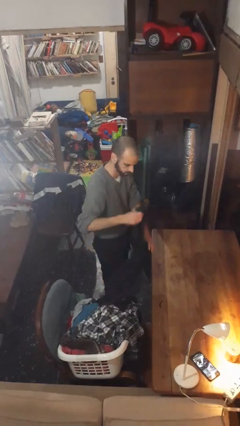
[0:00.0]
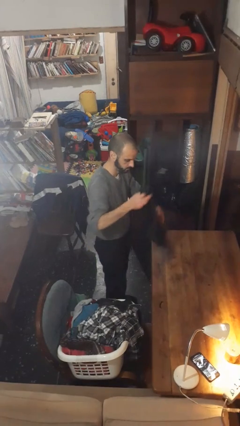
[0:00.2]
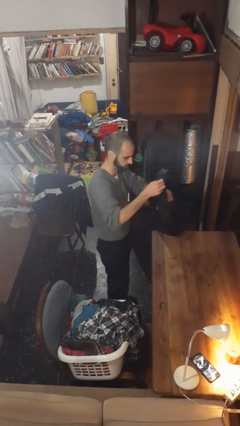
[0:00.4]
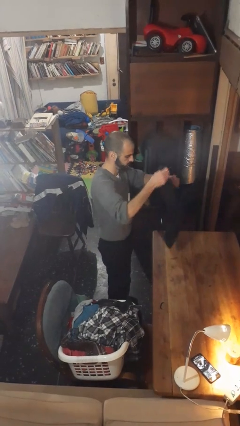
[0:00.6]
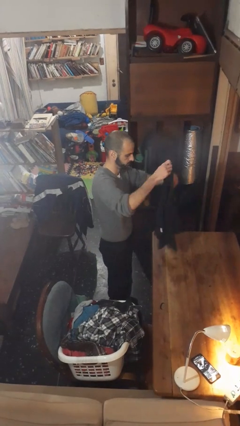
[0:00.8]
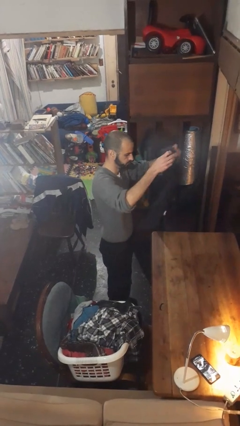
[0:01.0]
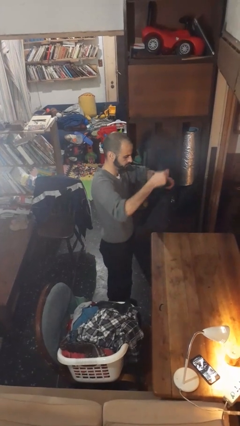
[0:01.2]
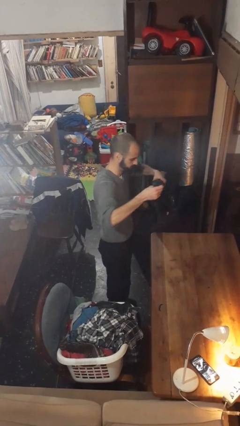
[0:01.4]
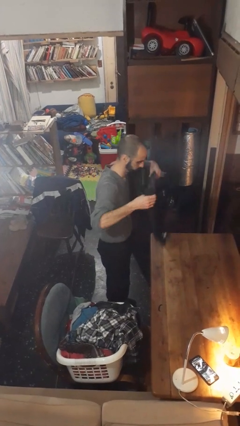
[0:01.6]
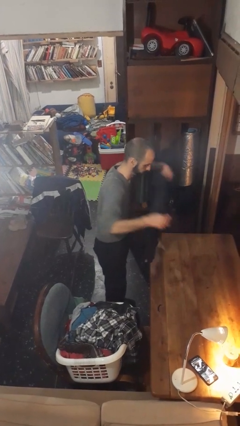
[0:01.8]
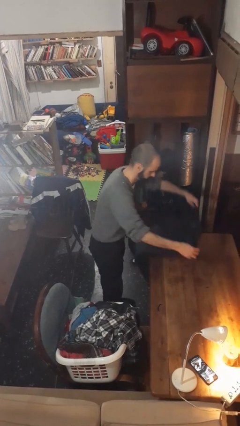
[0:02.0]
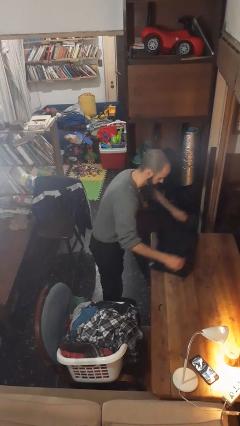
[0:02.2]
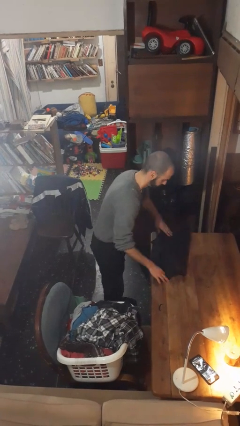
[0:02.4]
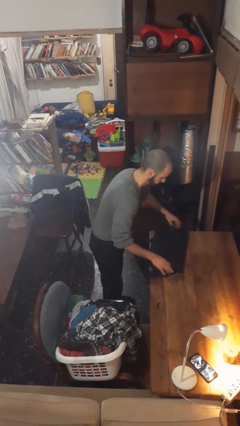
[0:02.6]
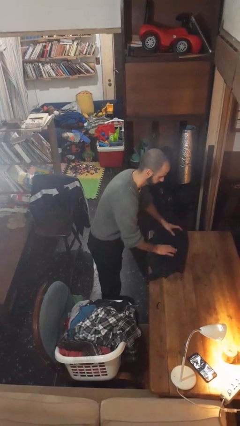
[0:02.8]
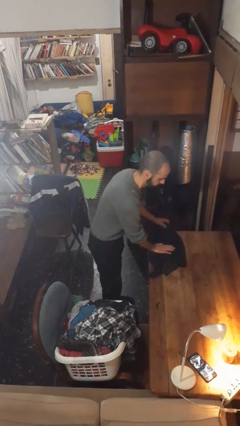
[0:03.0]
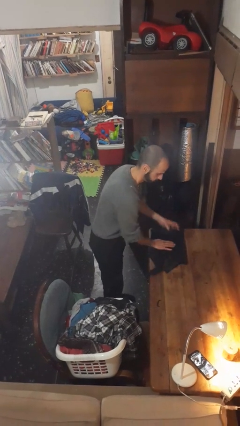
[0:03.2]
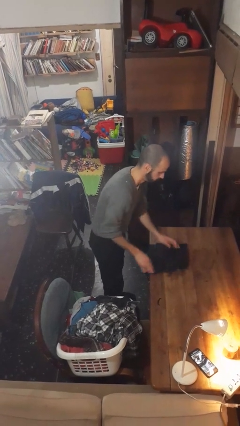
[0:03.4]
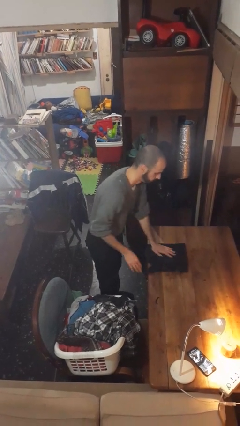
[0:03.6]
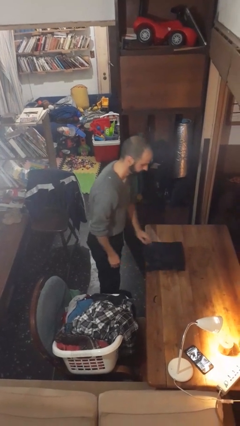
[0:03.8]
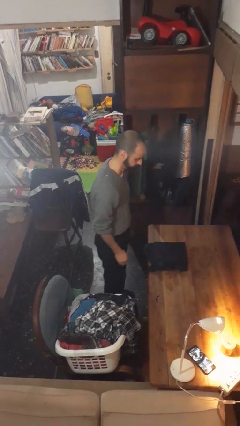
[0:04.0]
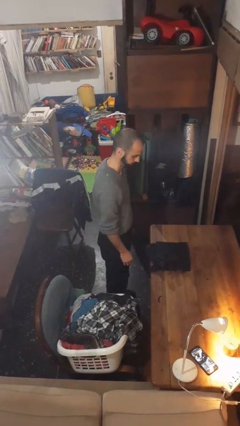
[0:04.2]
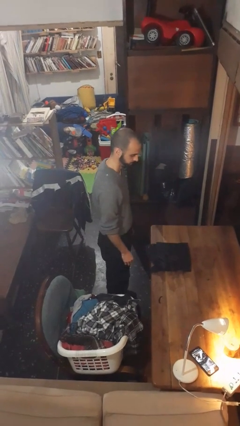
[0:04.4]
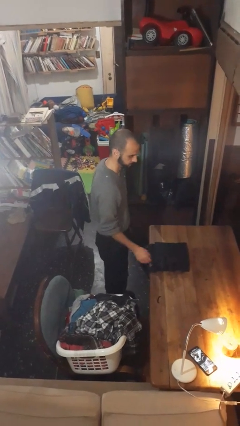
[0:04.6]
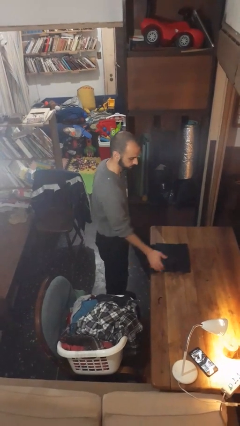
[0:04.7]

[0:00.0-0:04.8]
person folds shirt

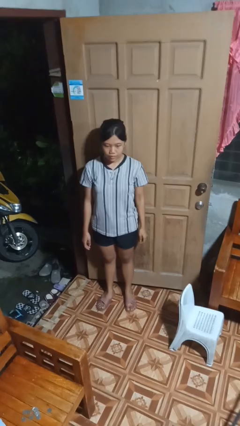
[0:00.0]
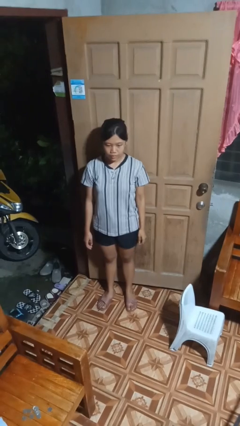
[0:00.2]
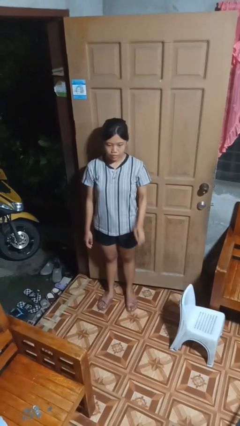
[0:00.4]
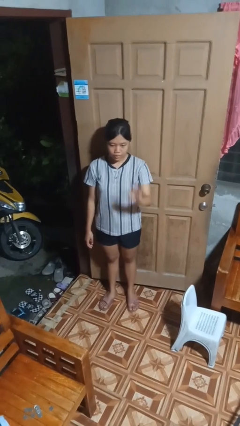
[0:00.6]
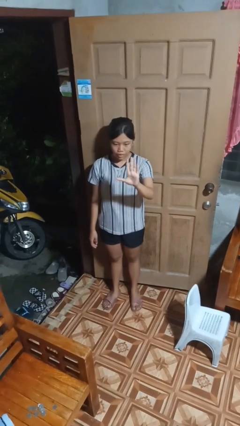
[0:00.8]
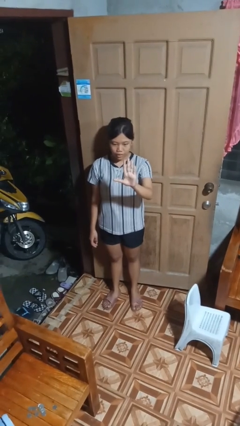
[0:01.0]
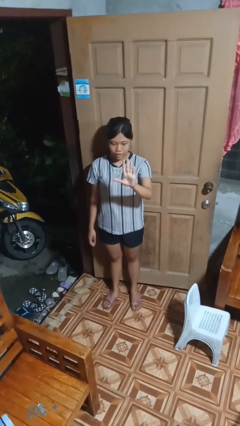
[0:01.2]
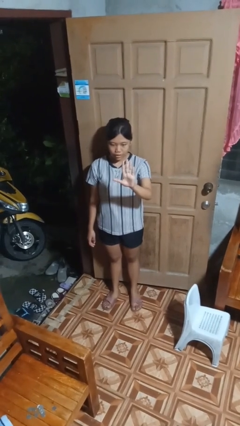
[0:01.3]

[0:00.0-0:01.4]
person gestures number five

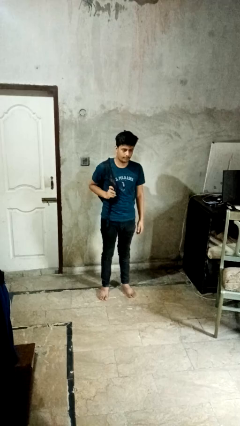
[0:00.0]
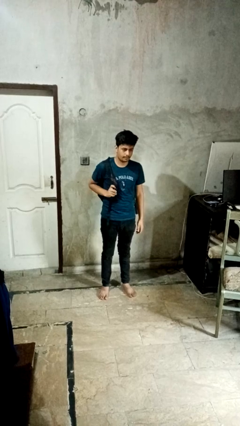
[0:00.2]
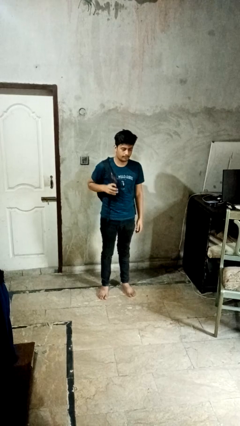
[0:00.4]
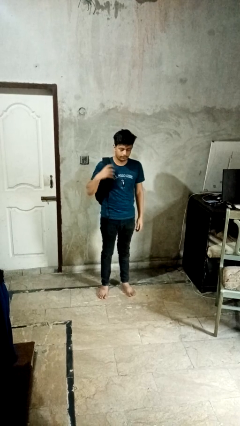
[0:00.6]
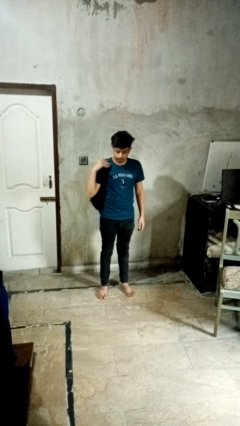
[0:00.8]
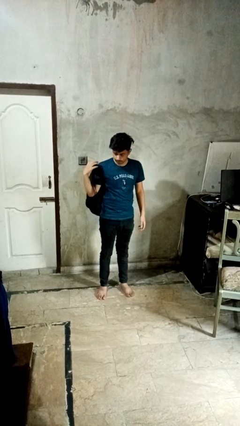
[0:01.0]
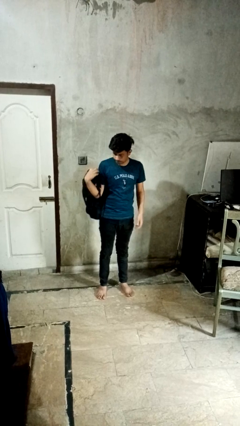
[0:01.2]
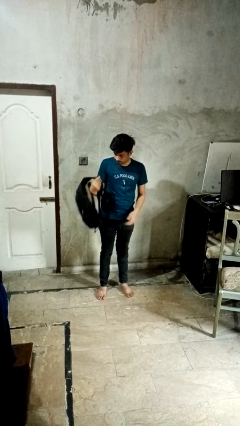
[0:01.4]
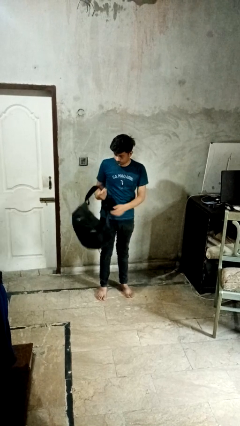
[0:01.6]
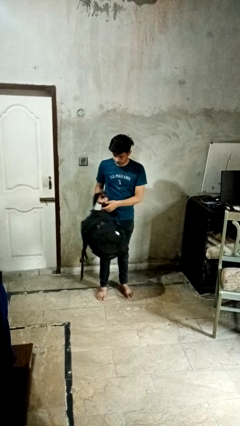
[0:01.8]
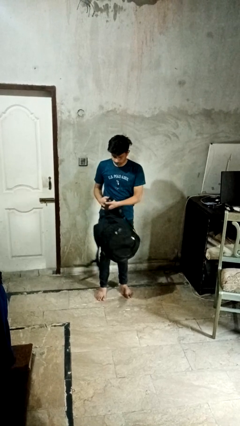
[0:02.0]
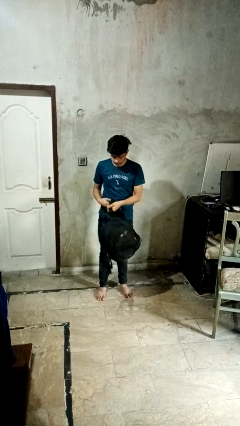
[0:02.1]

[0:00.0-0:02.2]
person takes off backpack

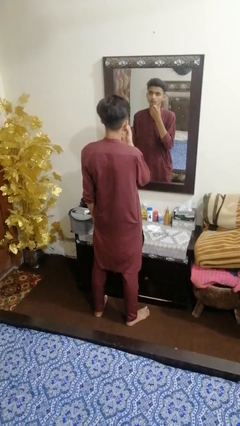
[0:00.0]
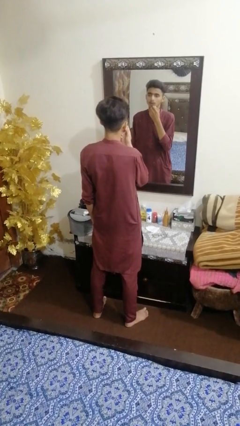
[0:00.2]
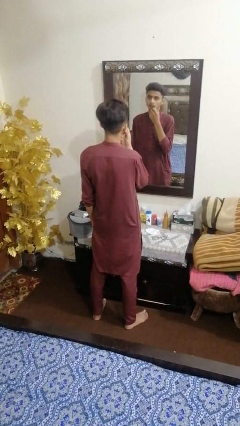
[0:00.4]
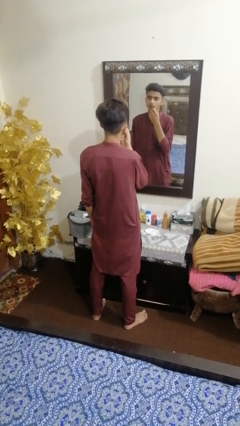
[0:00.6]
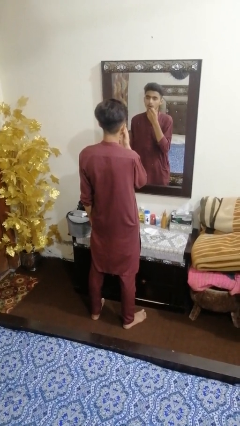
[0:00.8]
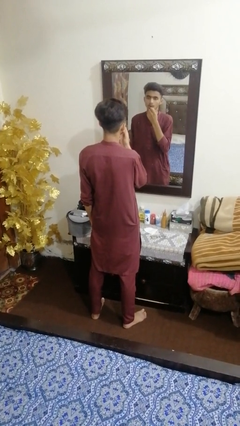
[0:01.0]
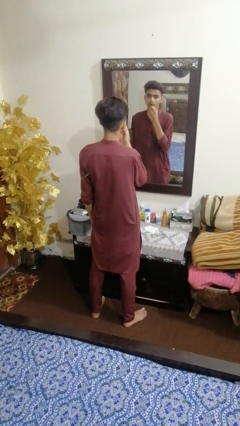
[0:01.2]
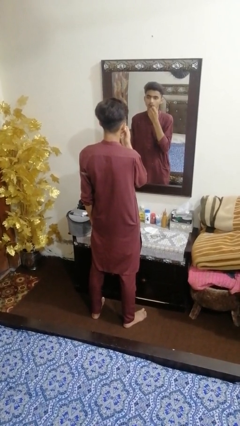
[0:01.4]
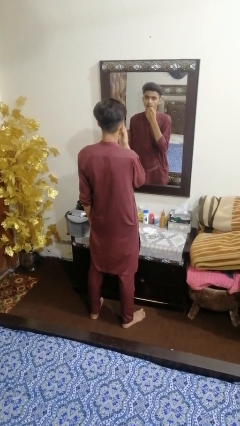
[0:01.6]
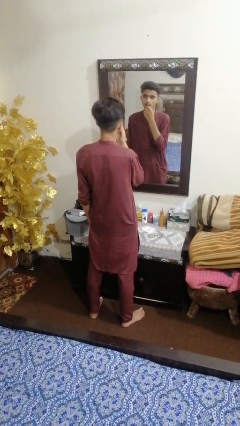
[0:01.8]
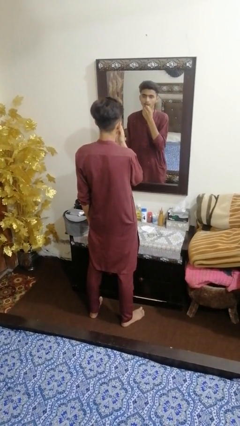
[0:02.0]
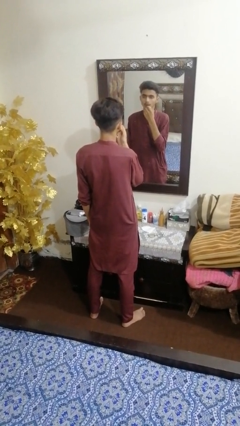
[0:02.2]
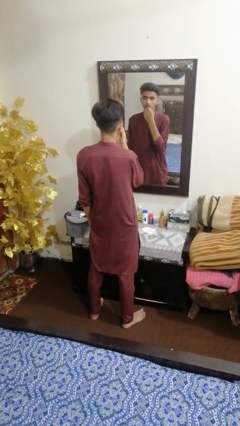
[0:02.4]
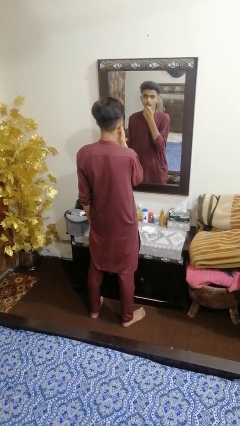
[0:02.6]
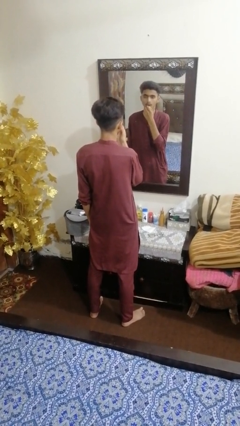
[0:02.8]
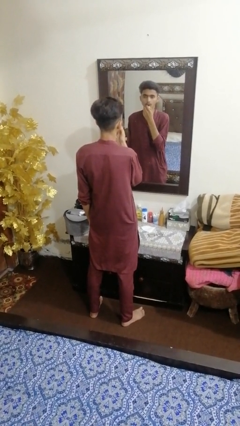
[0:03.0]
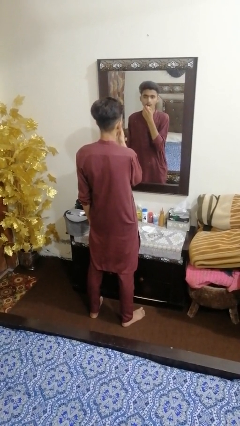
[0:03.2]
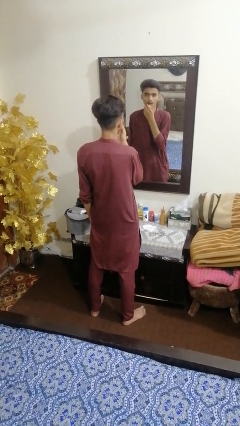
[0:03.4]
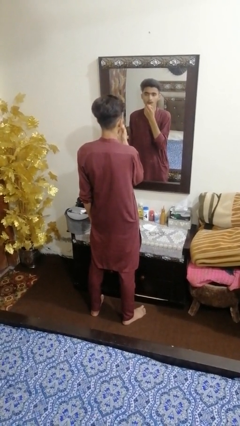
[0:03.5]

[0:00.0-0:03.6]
person applies lip makeup

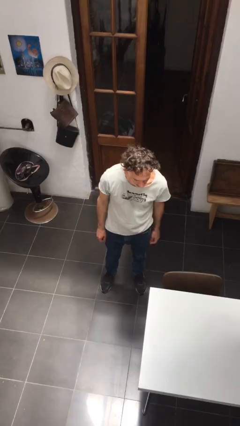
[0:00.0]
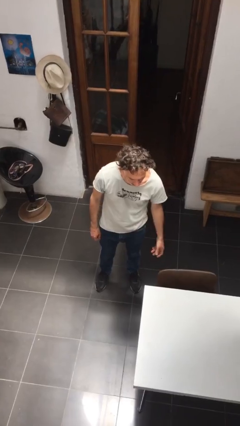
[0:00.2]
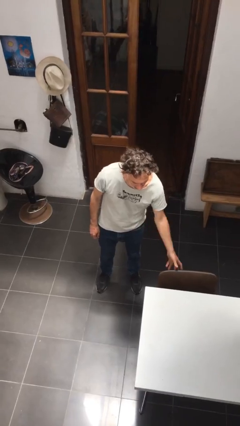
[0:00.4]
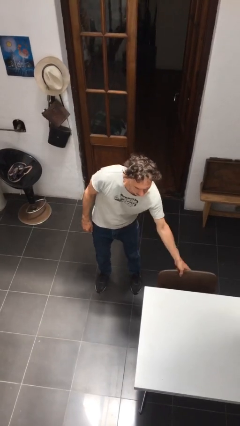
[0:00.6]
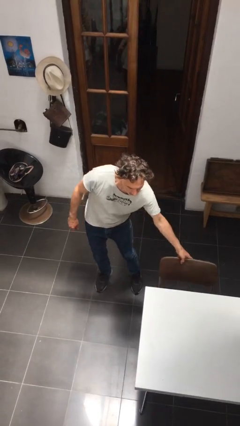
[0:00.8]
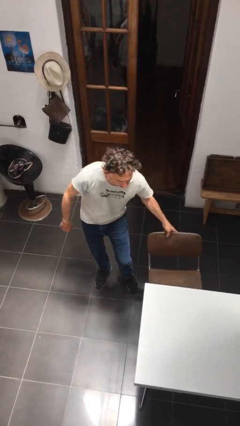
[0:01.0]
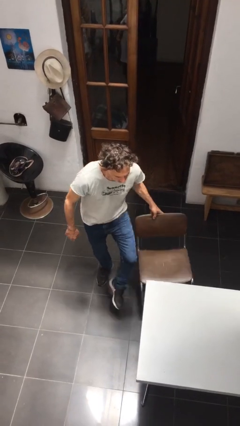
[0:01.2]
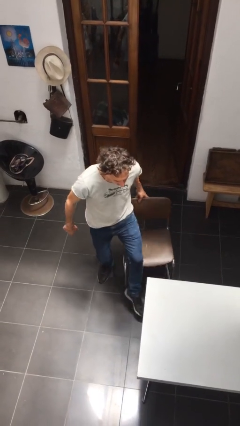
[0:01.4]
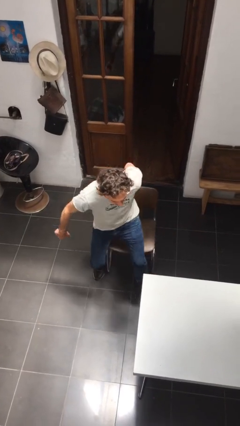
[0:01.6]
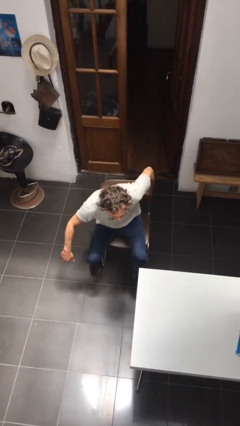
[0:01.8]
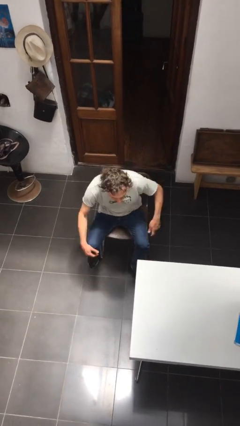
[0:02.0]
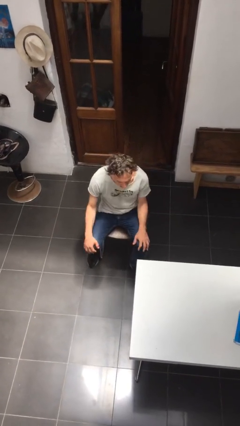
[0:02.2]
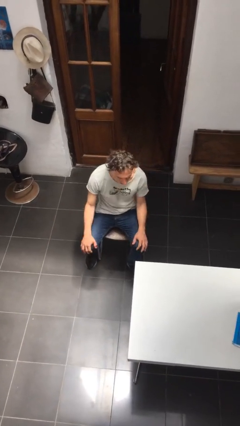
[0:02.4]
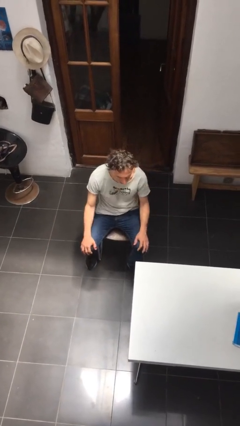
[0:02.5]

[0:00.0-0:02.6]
person sits down

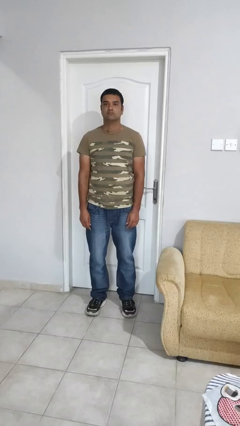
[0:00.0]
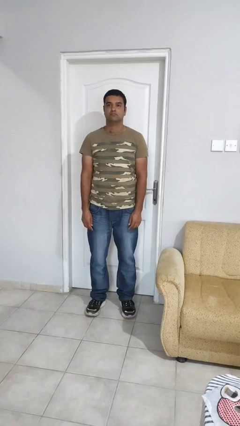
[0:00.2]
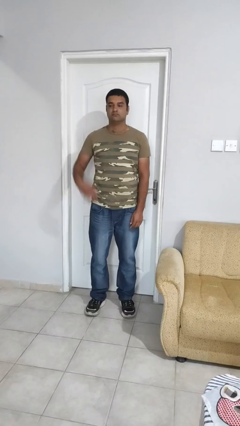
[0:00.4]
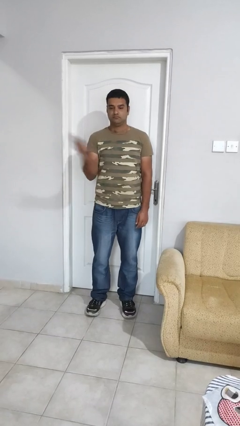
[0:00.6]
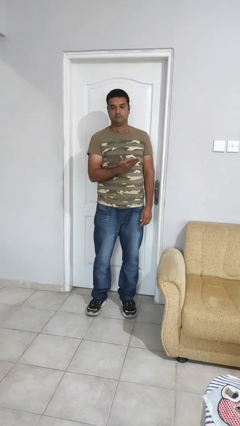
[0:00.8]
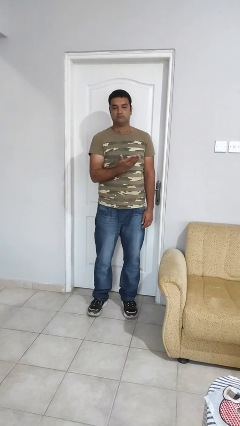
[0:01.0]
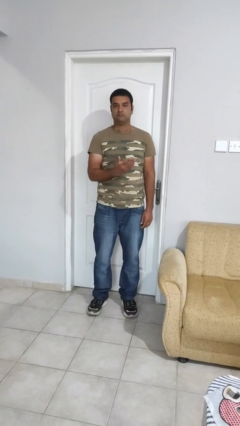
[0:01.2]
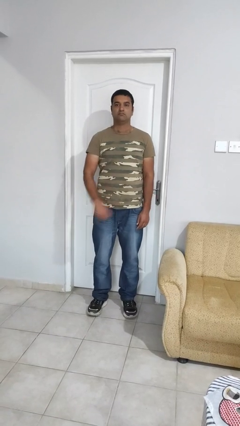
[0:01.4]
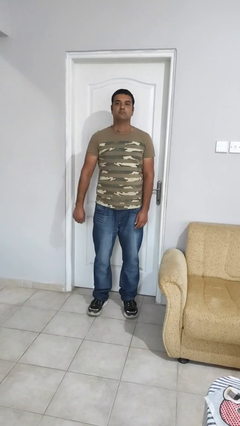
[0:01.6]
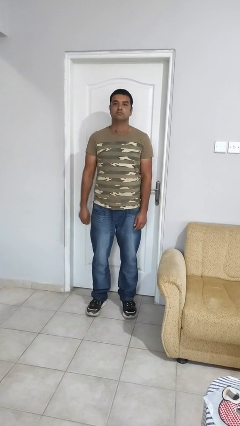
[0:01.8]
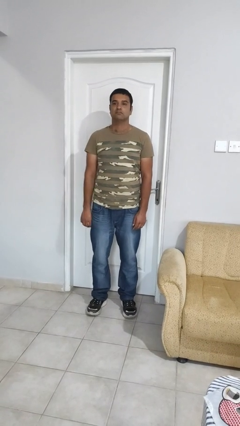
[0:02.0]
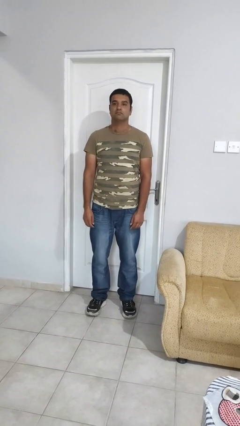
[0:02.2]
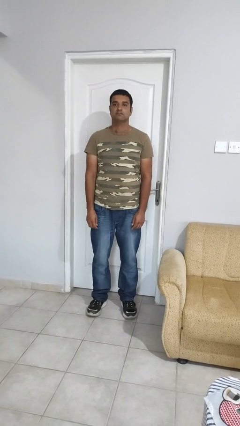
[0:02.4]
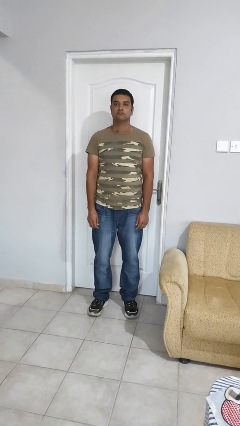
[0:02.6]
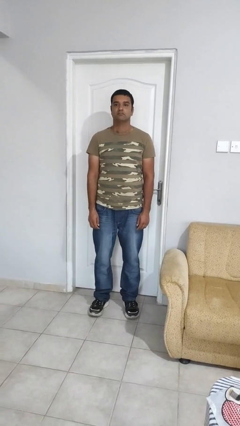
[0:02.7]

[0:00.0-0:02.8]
person karate chop
